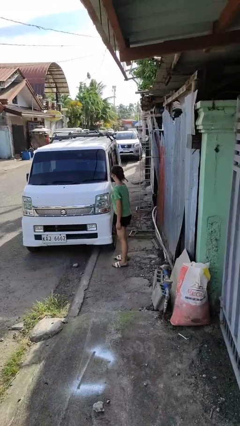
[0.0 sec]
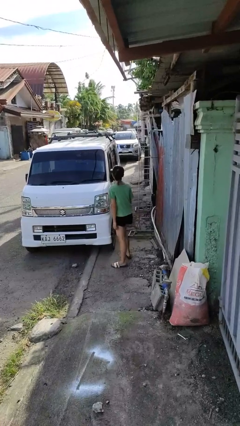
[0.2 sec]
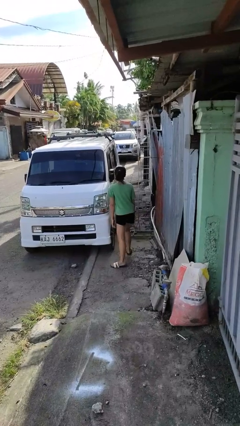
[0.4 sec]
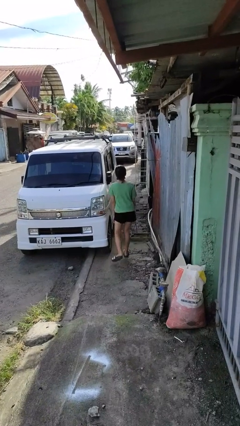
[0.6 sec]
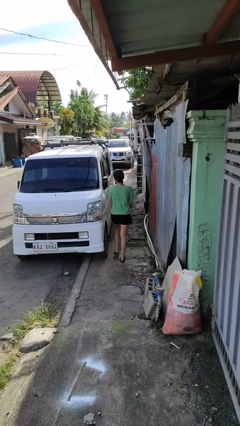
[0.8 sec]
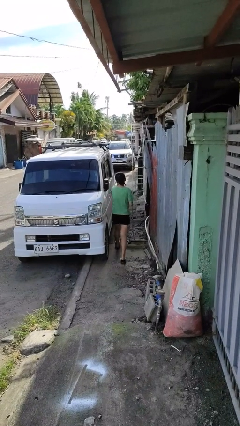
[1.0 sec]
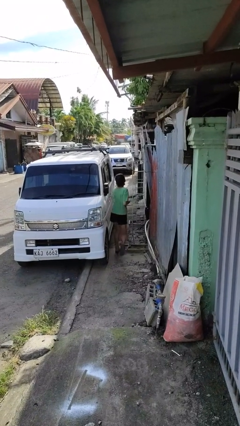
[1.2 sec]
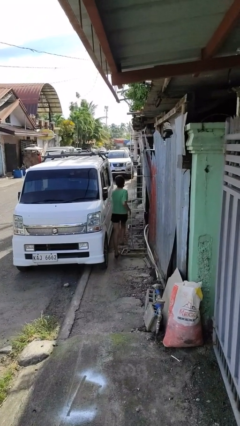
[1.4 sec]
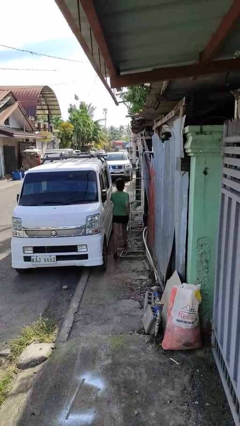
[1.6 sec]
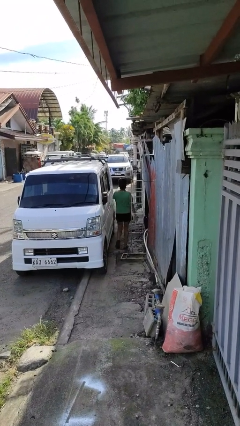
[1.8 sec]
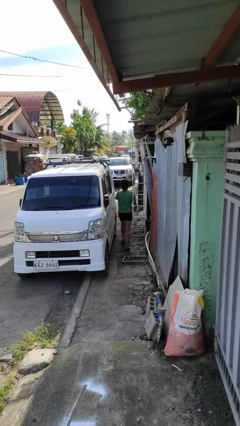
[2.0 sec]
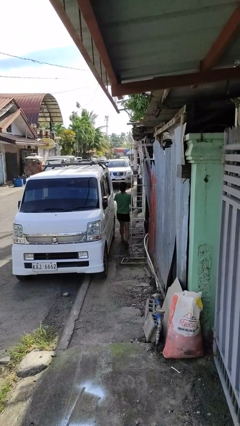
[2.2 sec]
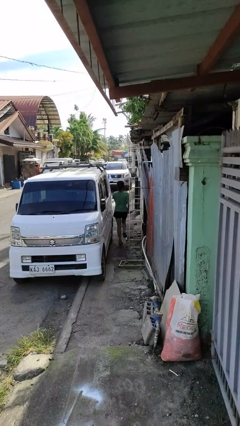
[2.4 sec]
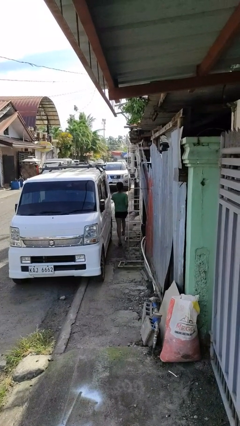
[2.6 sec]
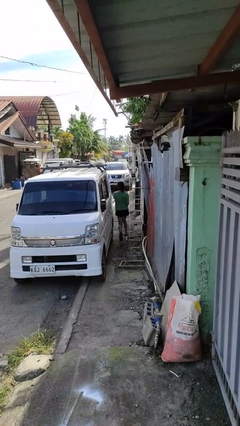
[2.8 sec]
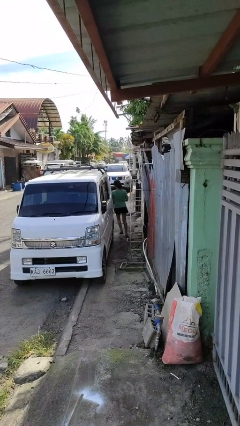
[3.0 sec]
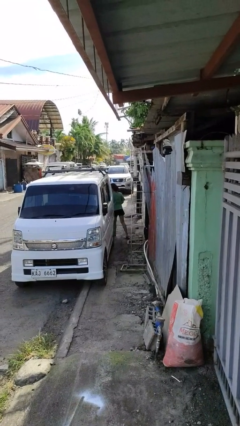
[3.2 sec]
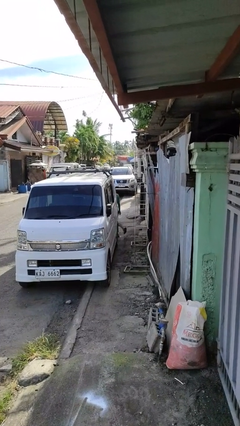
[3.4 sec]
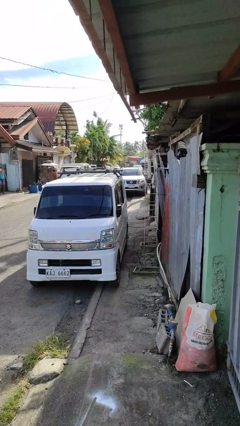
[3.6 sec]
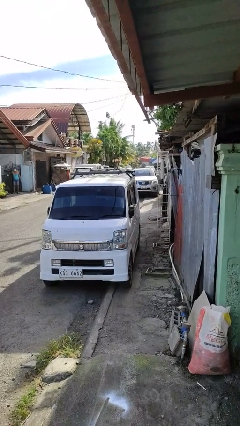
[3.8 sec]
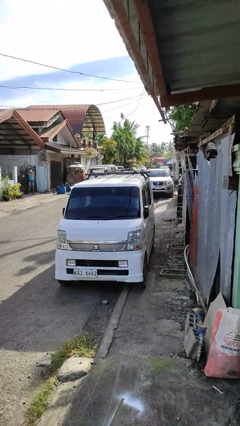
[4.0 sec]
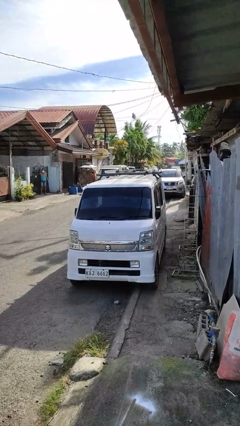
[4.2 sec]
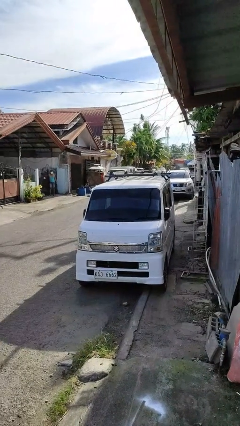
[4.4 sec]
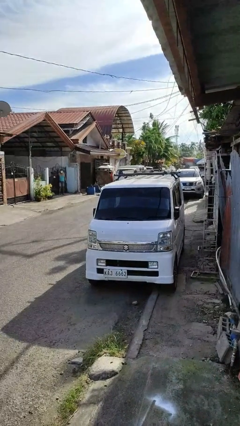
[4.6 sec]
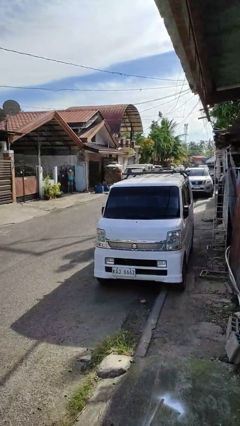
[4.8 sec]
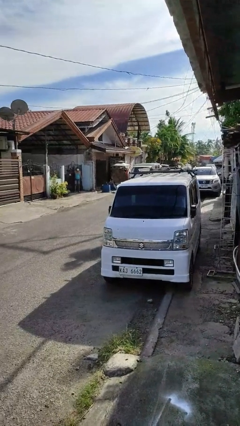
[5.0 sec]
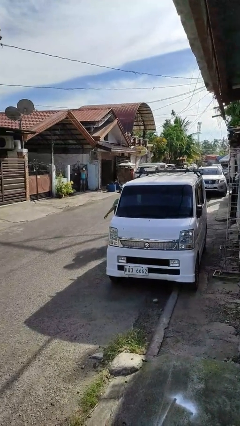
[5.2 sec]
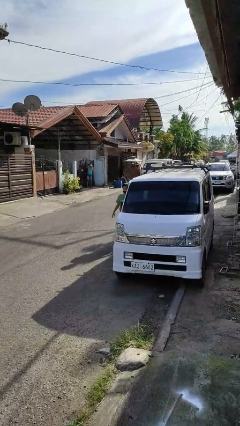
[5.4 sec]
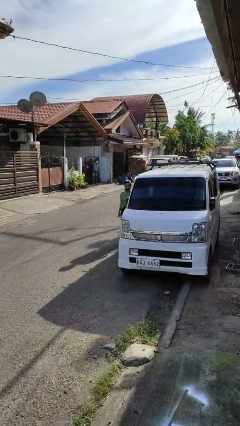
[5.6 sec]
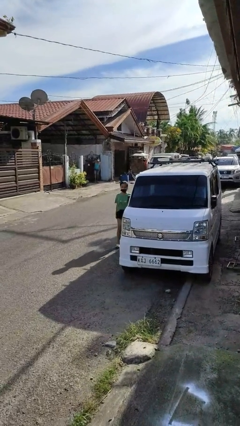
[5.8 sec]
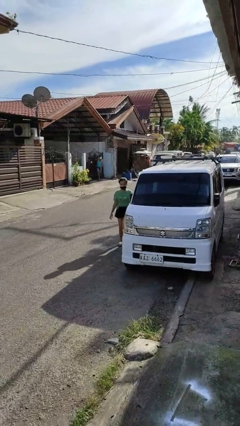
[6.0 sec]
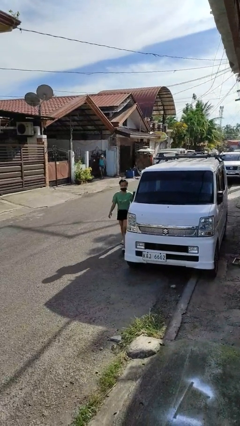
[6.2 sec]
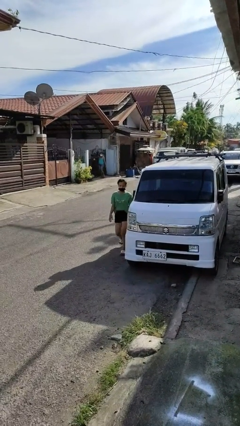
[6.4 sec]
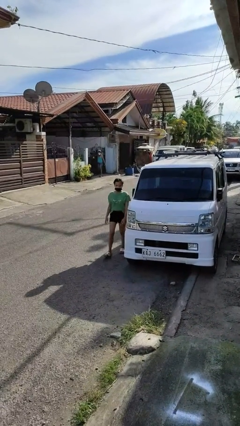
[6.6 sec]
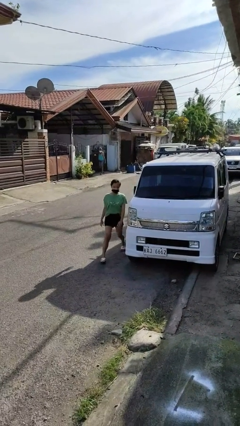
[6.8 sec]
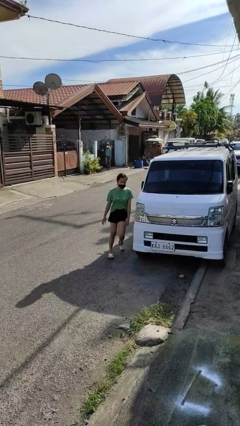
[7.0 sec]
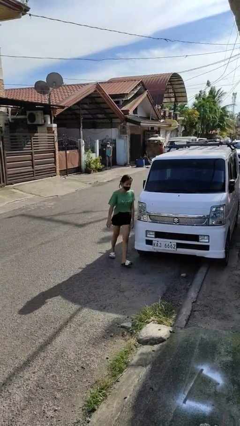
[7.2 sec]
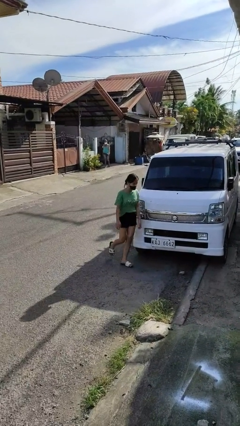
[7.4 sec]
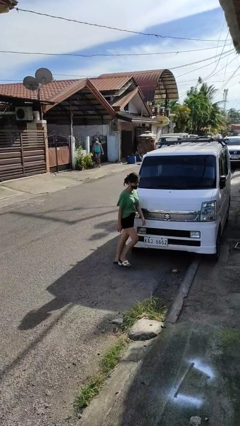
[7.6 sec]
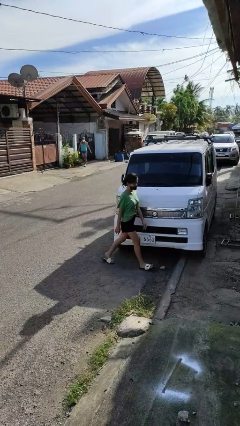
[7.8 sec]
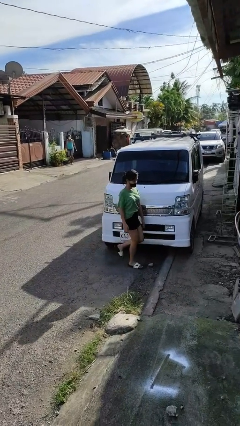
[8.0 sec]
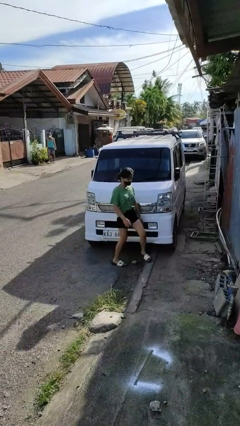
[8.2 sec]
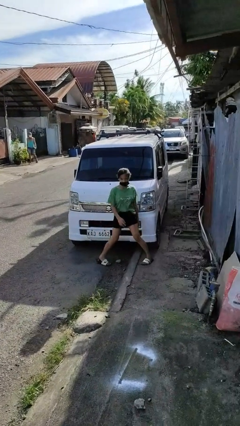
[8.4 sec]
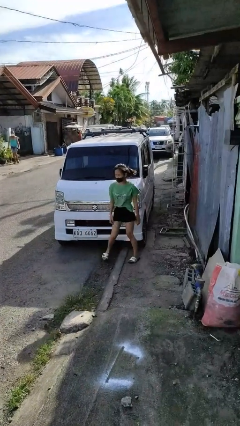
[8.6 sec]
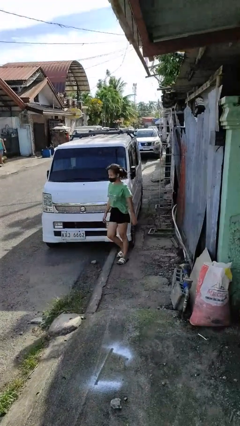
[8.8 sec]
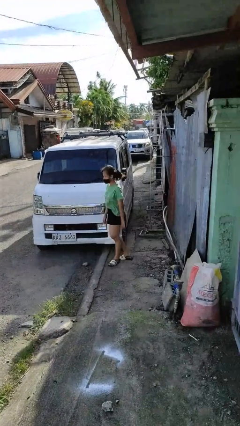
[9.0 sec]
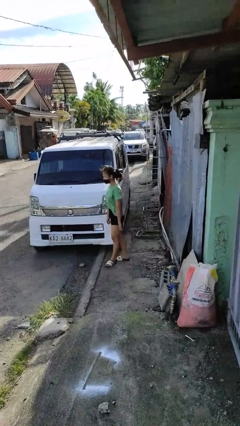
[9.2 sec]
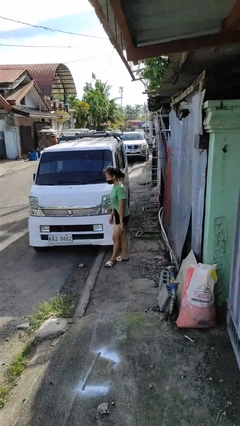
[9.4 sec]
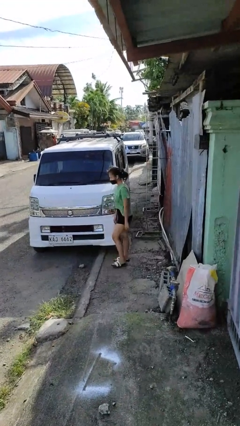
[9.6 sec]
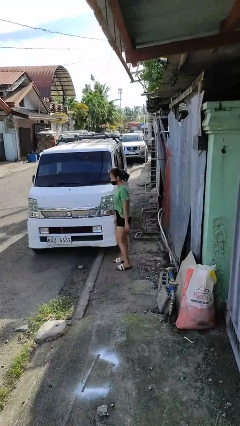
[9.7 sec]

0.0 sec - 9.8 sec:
person walks around car

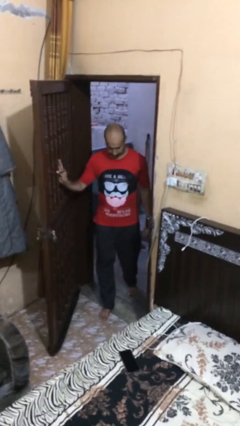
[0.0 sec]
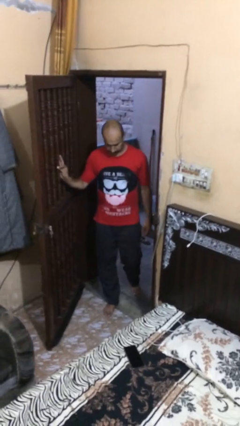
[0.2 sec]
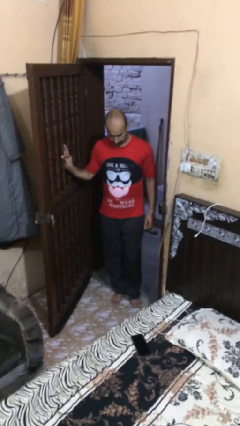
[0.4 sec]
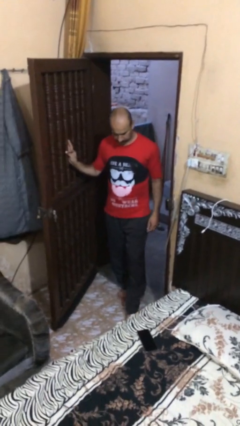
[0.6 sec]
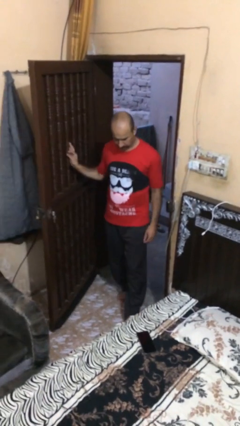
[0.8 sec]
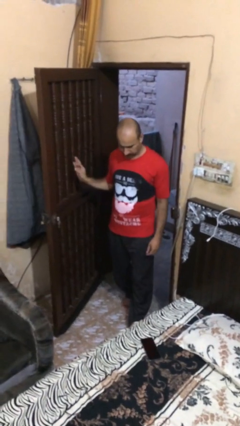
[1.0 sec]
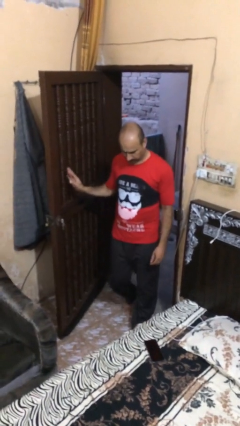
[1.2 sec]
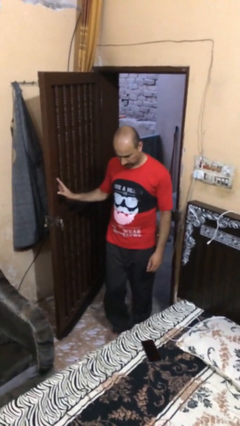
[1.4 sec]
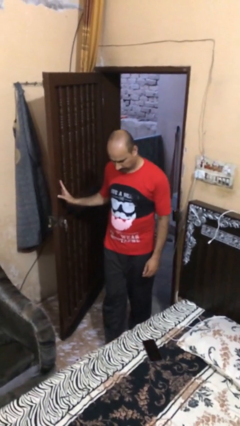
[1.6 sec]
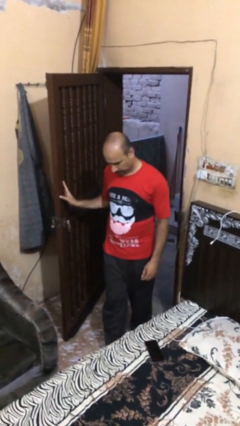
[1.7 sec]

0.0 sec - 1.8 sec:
person enters scene through structure

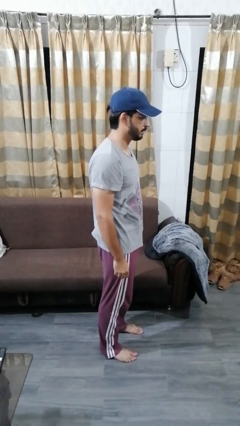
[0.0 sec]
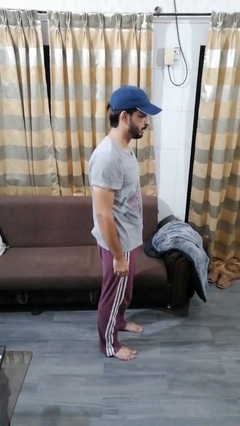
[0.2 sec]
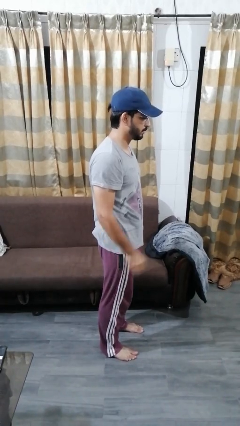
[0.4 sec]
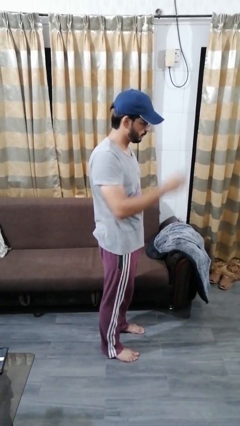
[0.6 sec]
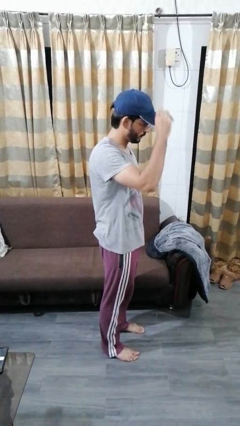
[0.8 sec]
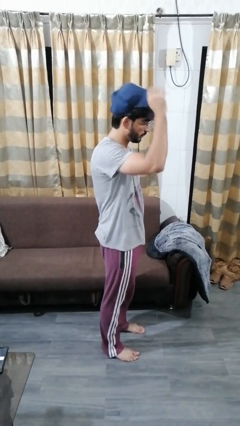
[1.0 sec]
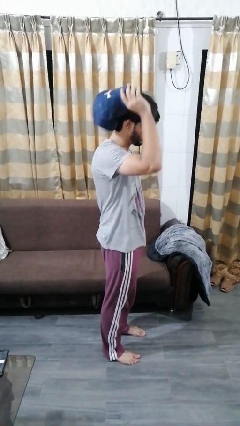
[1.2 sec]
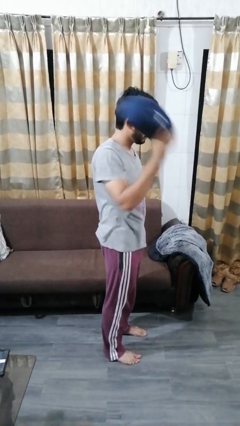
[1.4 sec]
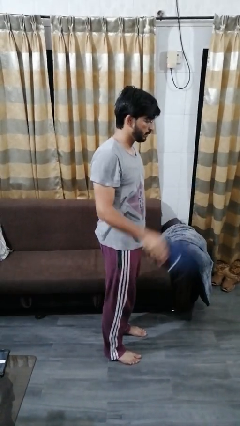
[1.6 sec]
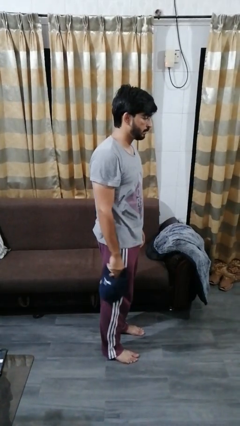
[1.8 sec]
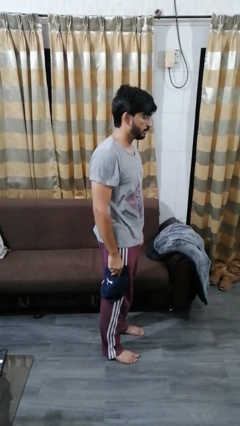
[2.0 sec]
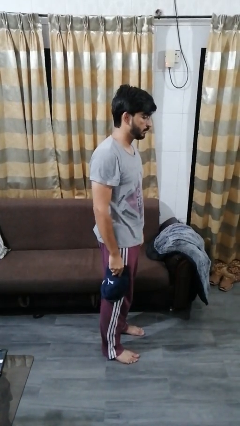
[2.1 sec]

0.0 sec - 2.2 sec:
person takes off hat

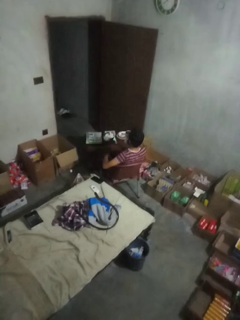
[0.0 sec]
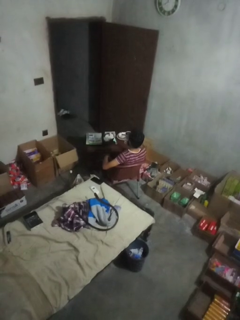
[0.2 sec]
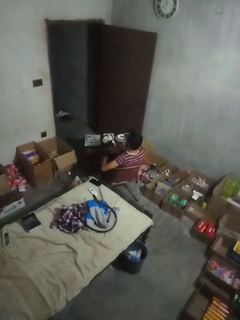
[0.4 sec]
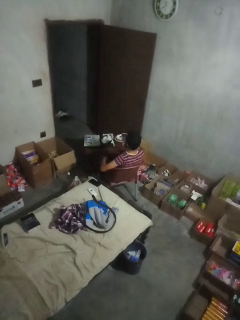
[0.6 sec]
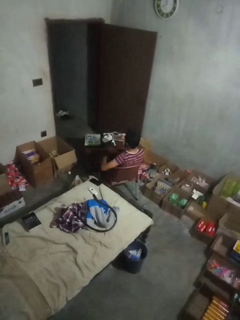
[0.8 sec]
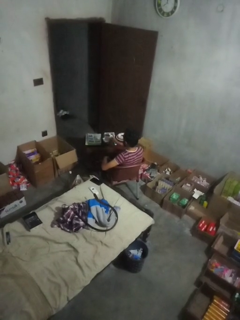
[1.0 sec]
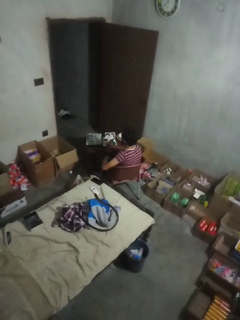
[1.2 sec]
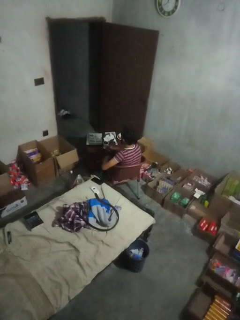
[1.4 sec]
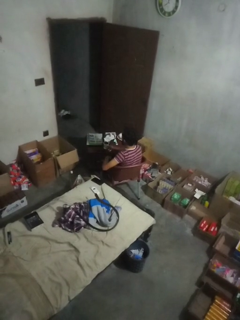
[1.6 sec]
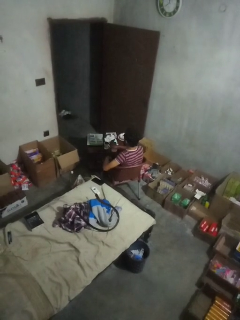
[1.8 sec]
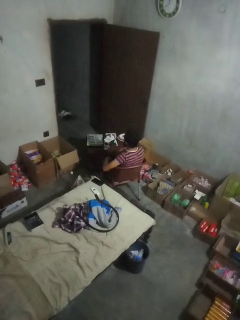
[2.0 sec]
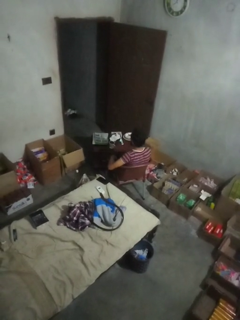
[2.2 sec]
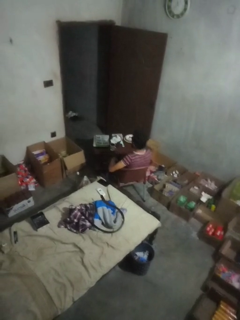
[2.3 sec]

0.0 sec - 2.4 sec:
person puts down object on table

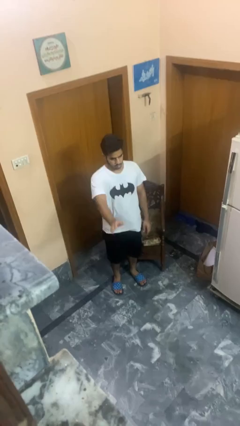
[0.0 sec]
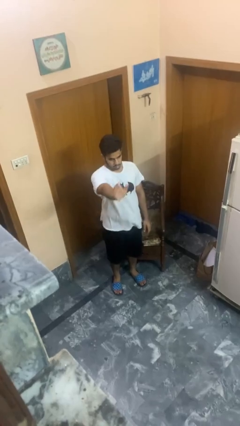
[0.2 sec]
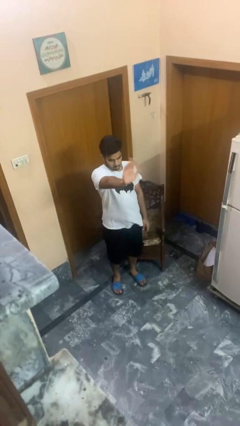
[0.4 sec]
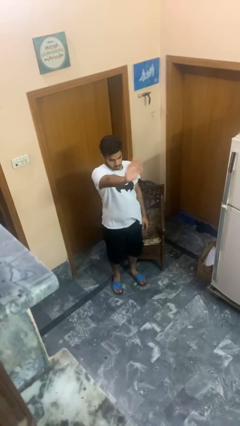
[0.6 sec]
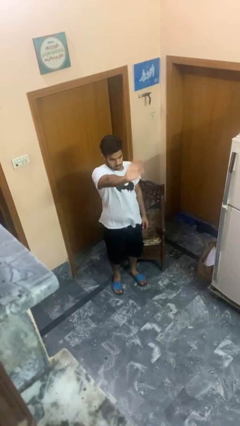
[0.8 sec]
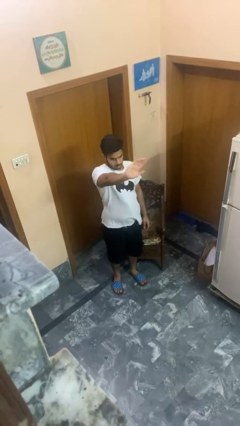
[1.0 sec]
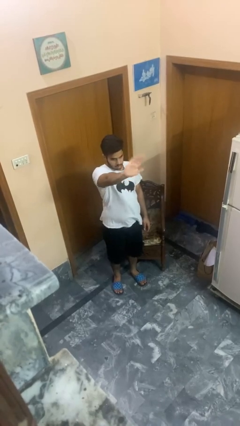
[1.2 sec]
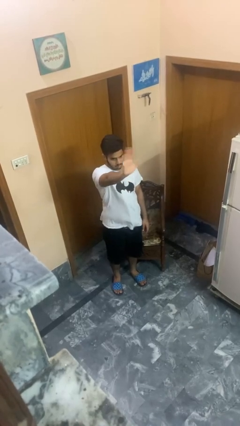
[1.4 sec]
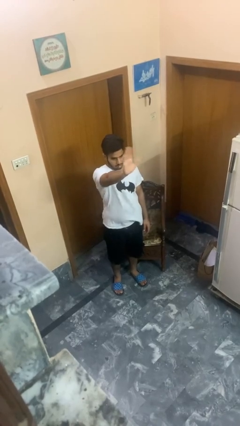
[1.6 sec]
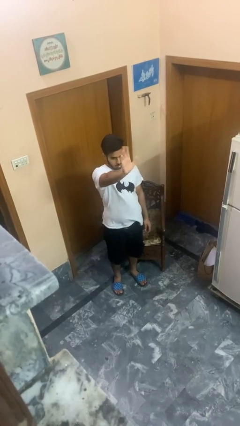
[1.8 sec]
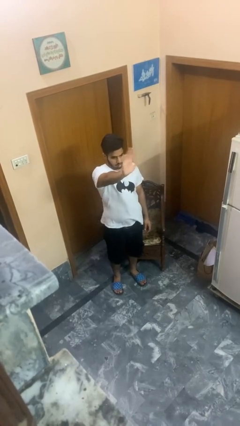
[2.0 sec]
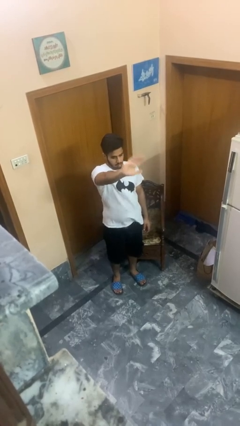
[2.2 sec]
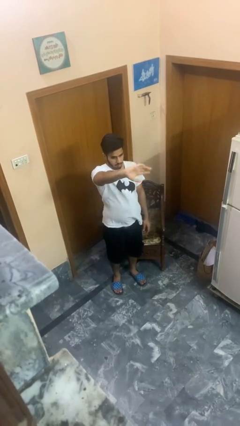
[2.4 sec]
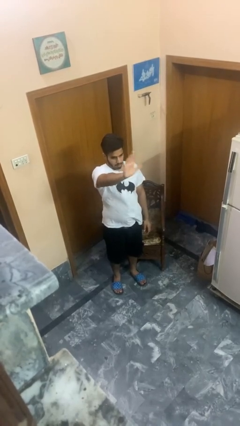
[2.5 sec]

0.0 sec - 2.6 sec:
person waves at person
